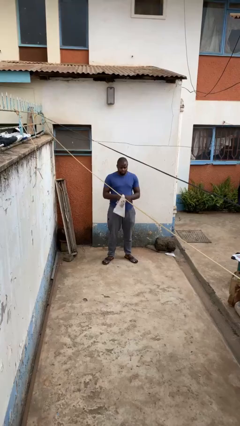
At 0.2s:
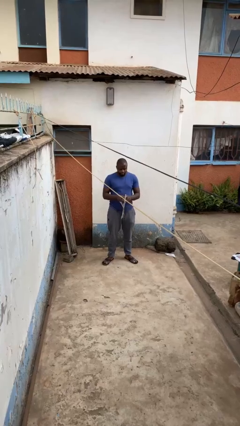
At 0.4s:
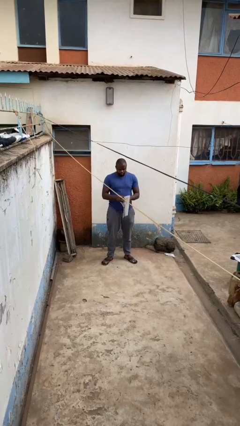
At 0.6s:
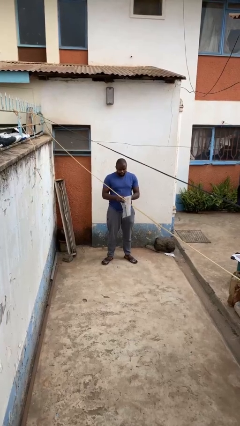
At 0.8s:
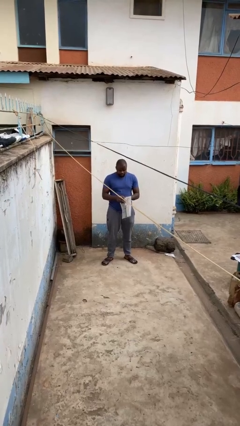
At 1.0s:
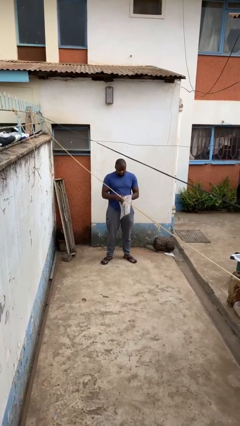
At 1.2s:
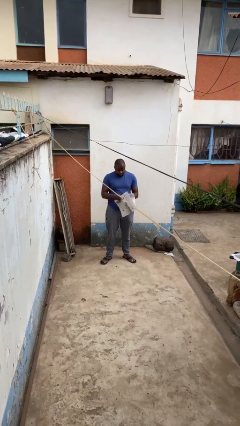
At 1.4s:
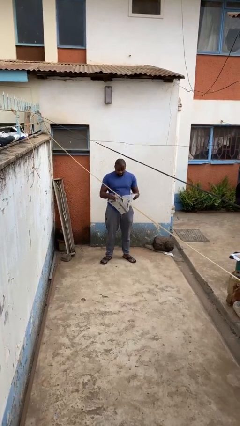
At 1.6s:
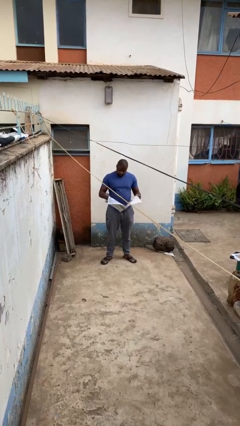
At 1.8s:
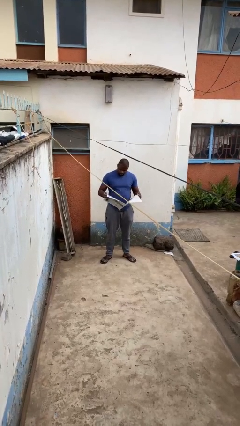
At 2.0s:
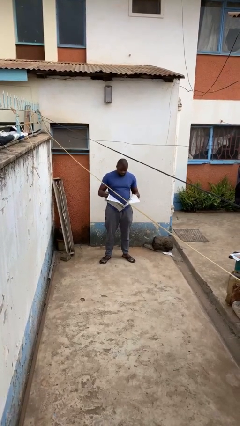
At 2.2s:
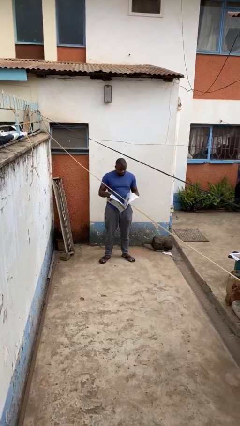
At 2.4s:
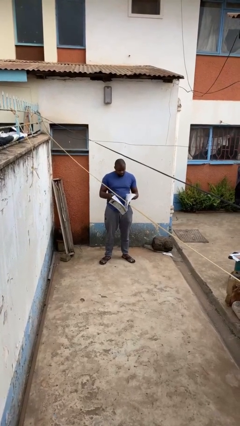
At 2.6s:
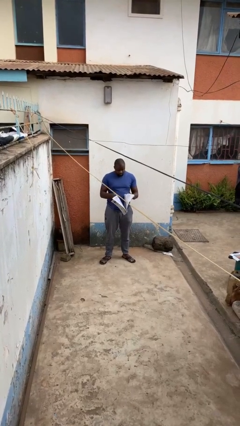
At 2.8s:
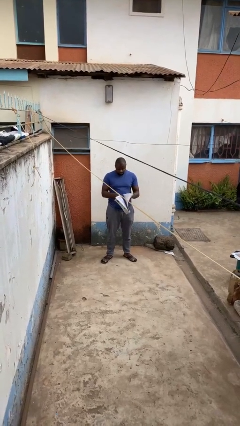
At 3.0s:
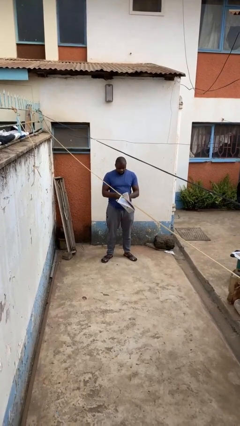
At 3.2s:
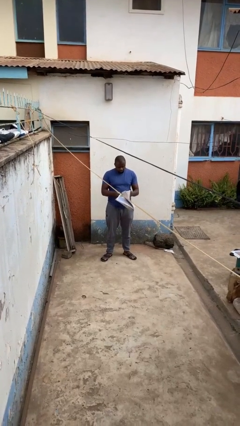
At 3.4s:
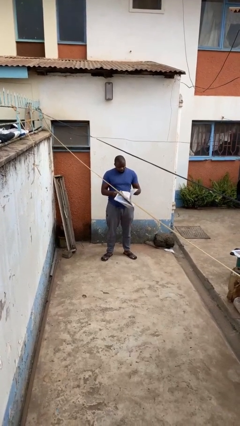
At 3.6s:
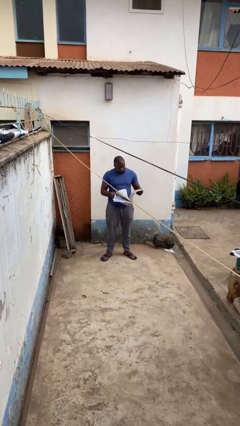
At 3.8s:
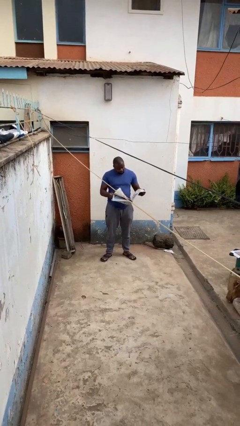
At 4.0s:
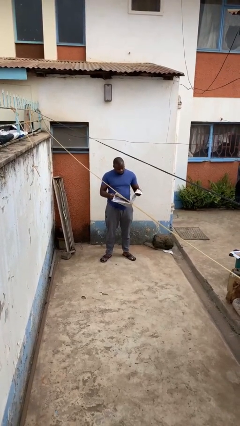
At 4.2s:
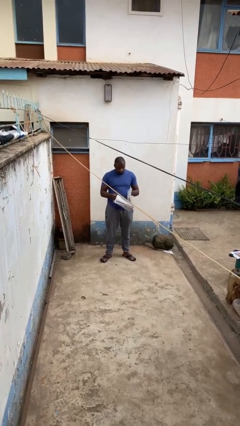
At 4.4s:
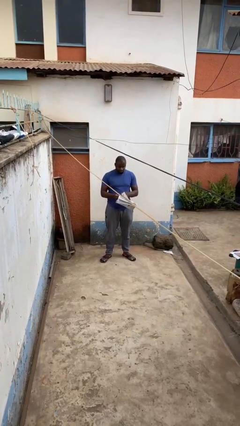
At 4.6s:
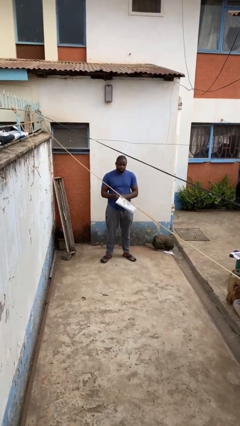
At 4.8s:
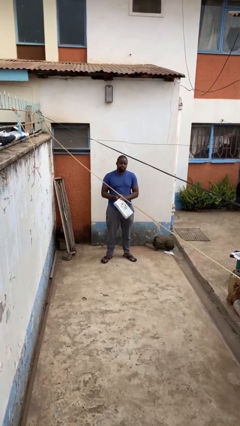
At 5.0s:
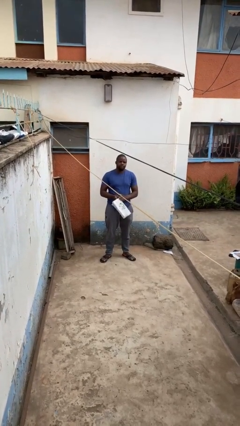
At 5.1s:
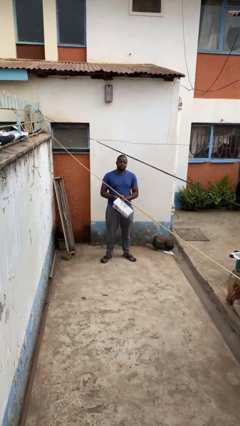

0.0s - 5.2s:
person reads newspaper

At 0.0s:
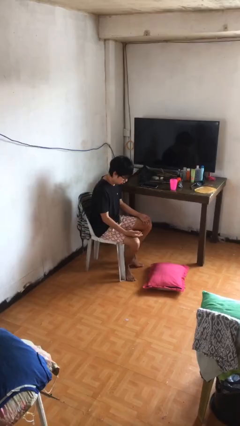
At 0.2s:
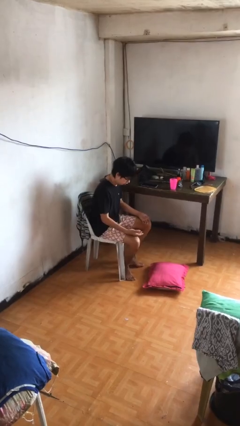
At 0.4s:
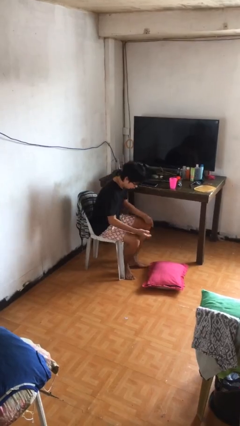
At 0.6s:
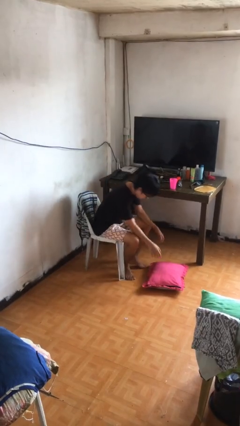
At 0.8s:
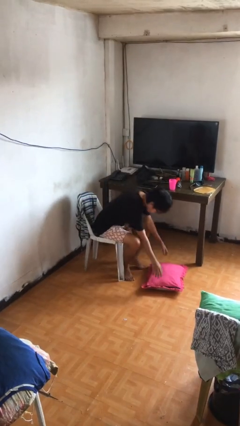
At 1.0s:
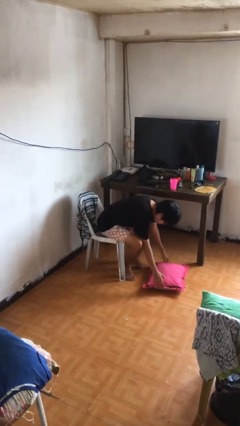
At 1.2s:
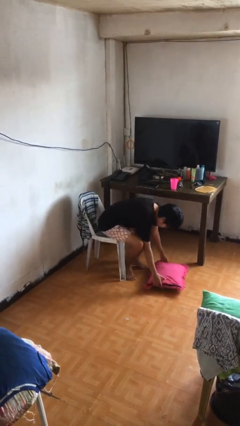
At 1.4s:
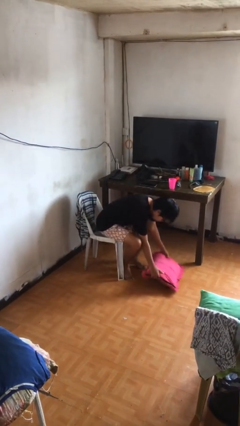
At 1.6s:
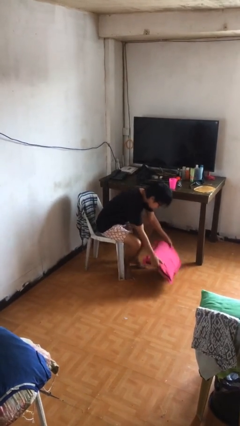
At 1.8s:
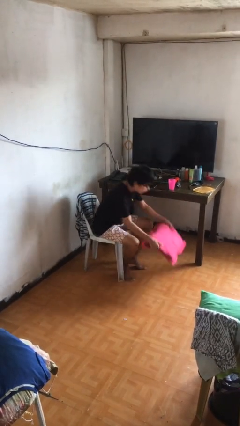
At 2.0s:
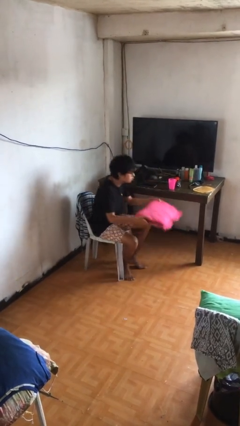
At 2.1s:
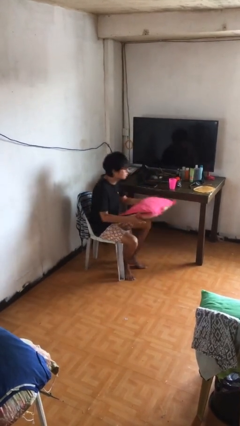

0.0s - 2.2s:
person picks up object from floor

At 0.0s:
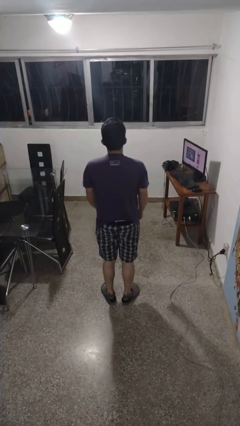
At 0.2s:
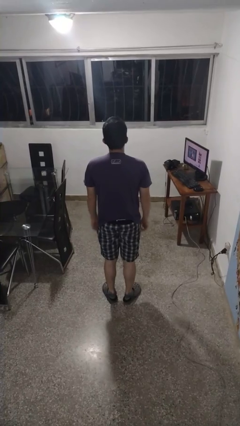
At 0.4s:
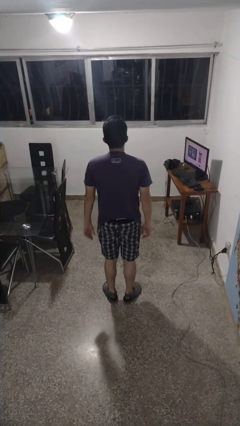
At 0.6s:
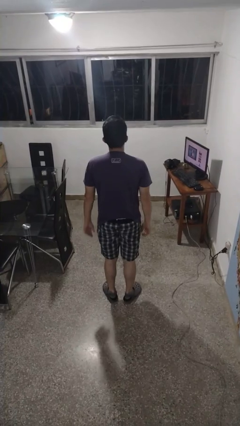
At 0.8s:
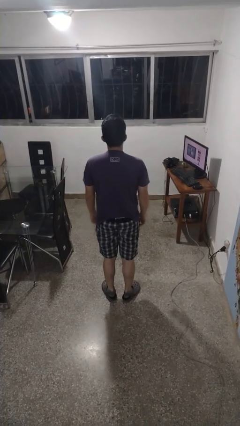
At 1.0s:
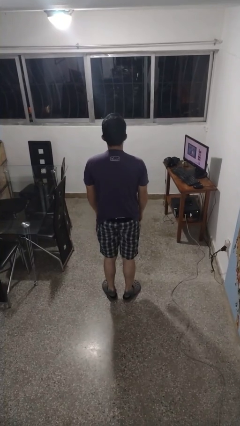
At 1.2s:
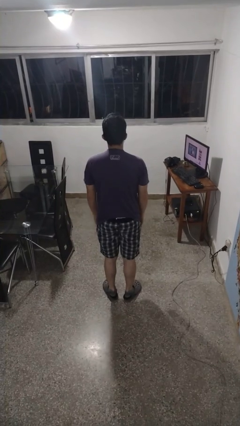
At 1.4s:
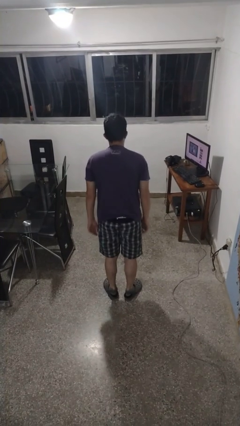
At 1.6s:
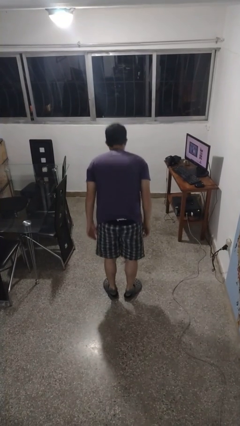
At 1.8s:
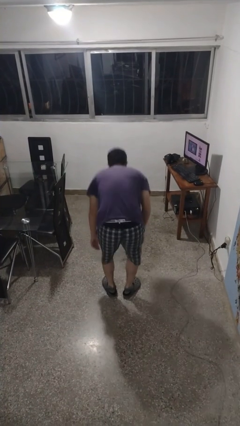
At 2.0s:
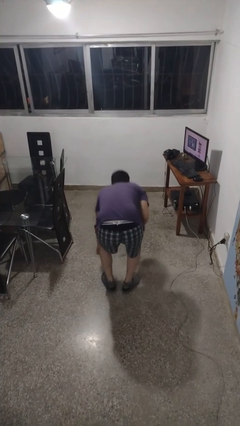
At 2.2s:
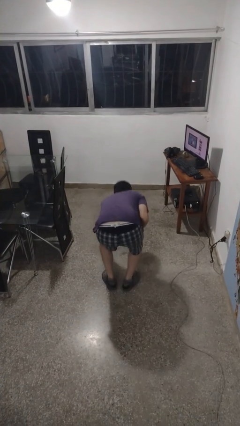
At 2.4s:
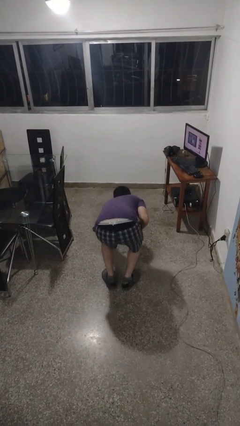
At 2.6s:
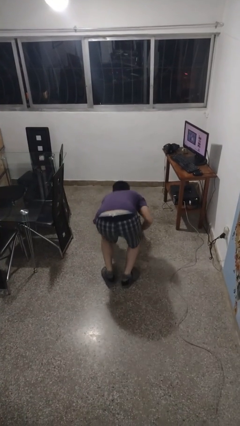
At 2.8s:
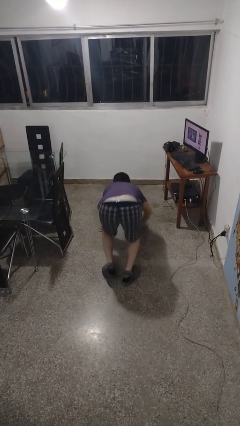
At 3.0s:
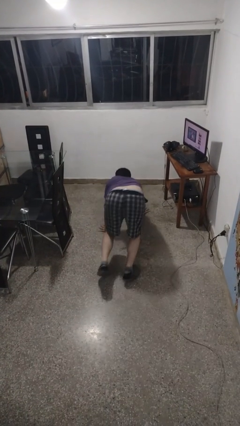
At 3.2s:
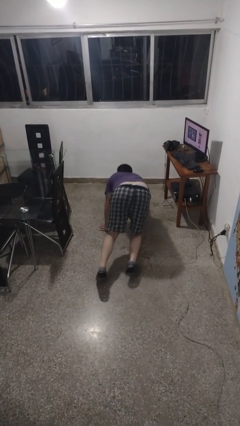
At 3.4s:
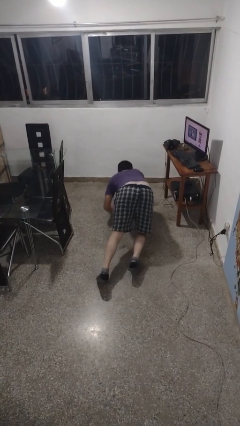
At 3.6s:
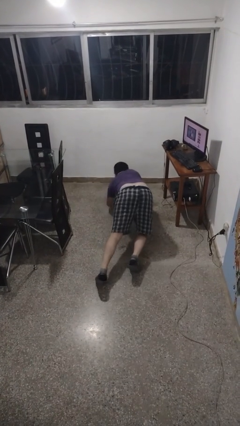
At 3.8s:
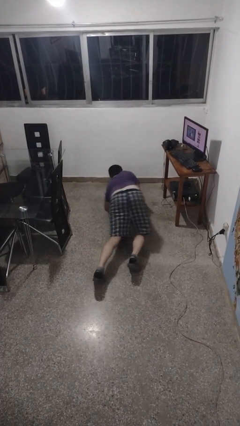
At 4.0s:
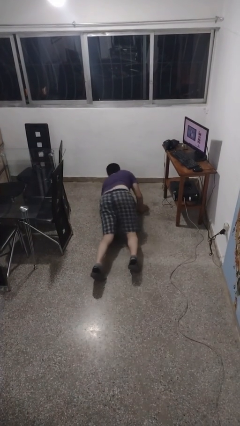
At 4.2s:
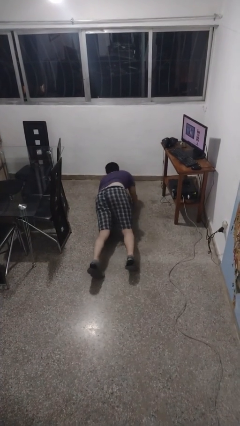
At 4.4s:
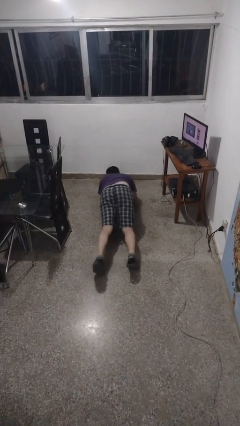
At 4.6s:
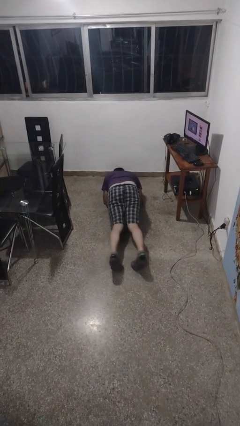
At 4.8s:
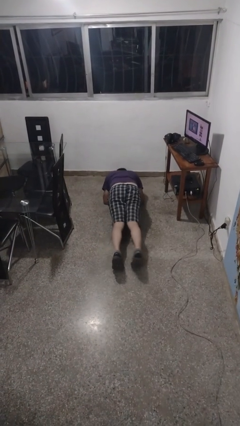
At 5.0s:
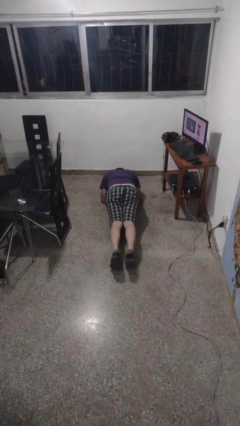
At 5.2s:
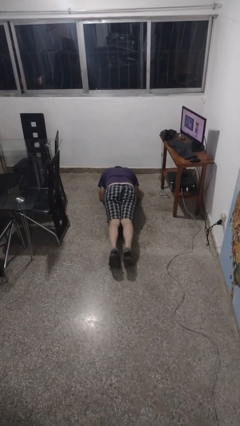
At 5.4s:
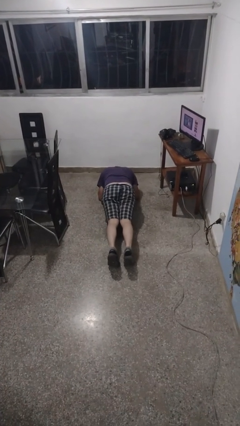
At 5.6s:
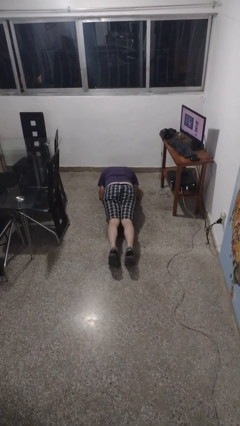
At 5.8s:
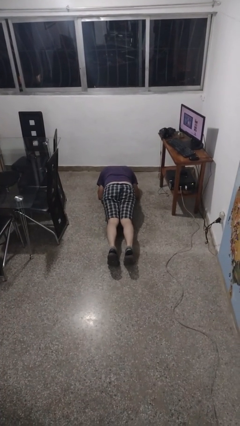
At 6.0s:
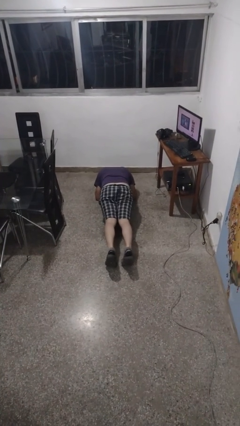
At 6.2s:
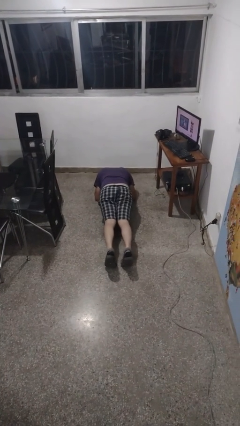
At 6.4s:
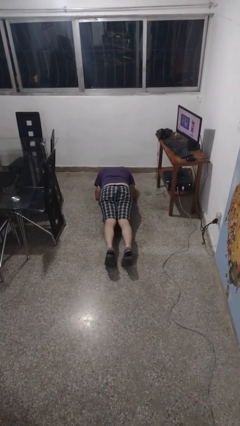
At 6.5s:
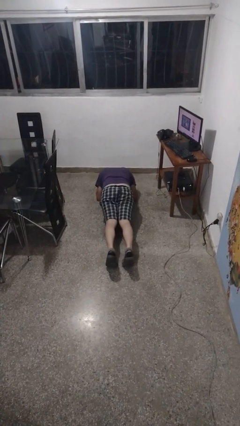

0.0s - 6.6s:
person exercises with plank

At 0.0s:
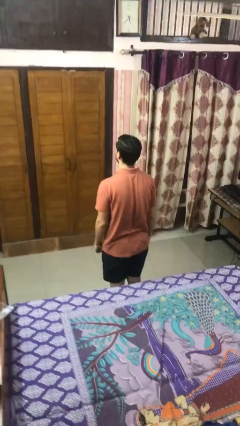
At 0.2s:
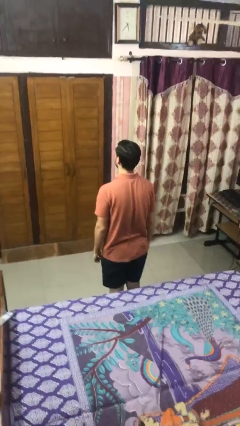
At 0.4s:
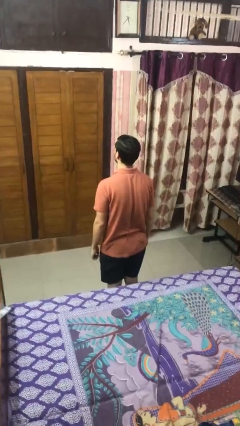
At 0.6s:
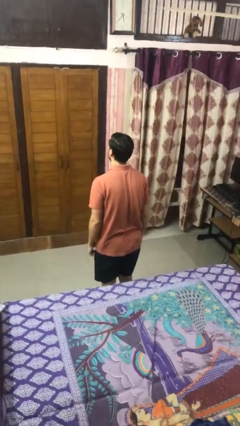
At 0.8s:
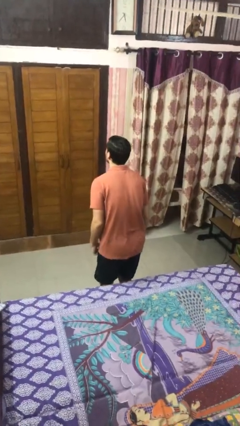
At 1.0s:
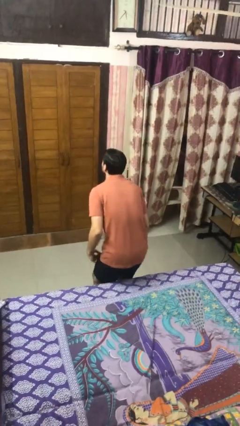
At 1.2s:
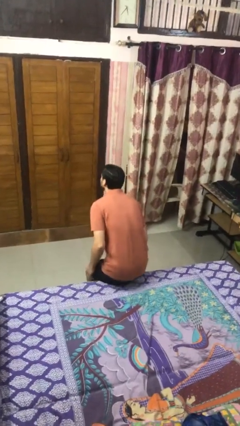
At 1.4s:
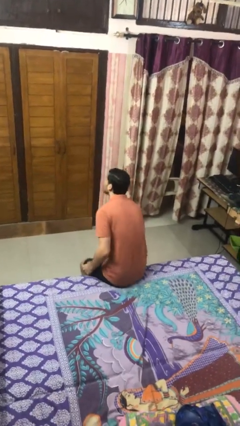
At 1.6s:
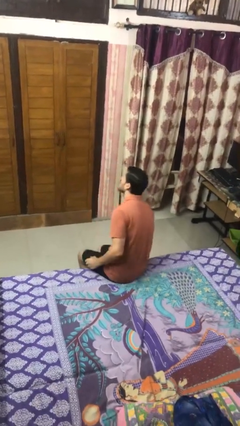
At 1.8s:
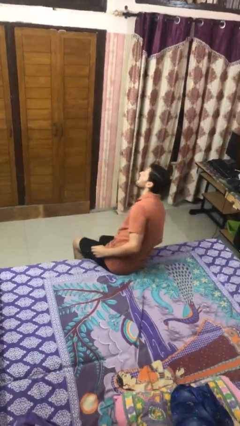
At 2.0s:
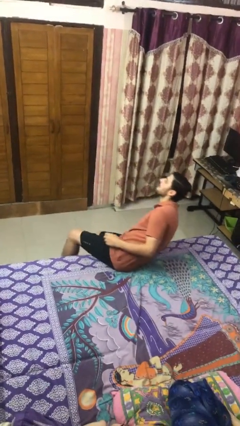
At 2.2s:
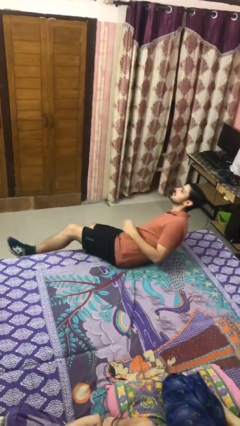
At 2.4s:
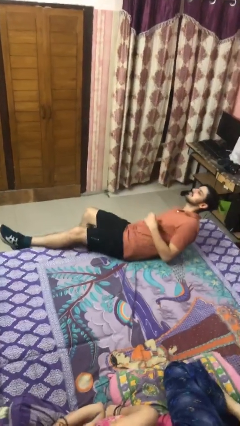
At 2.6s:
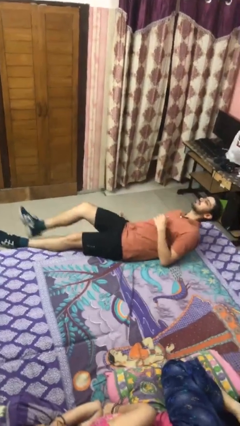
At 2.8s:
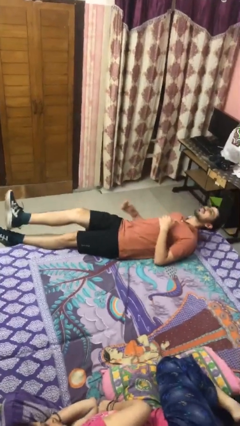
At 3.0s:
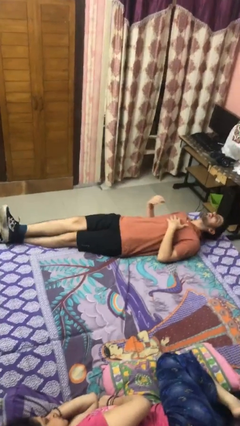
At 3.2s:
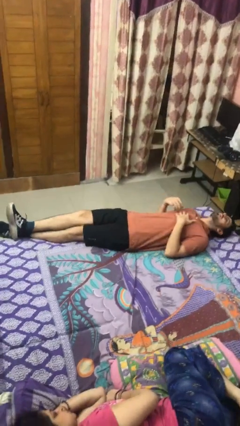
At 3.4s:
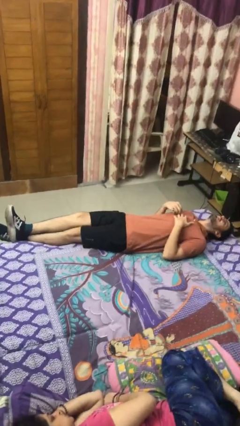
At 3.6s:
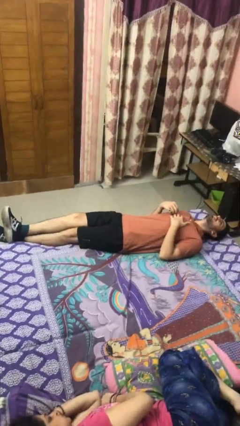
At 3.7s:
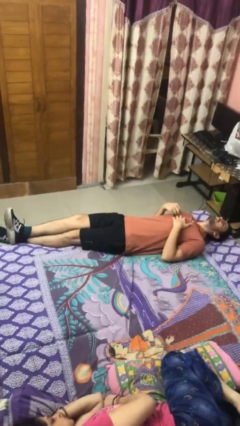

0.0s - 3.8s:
person lies down on bed
